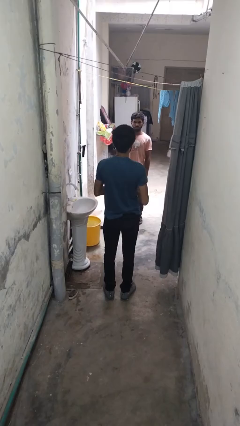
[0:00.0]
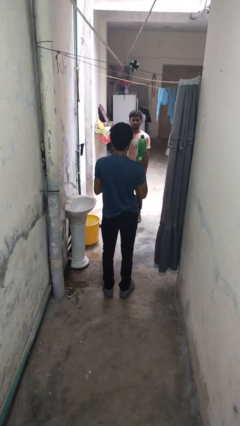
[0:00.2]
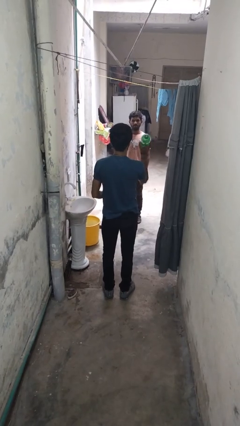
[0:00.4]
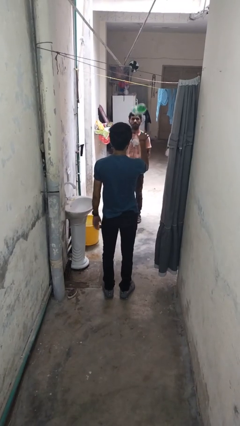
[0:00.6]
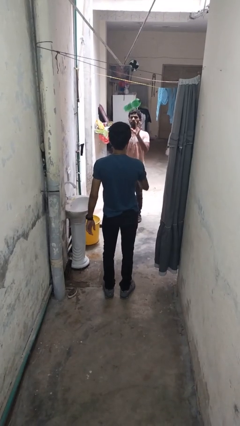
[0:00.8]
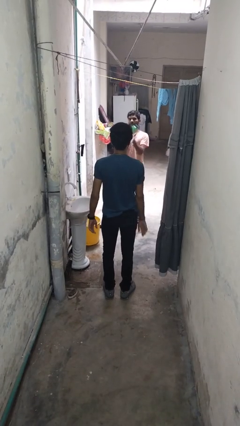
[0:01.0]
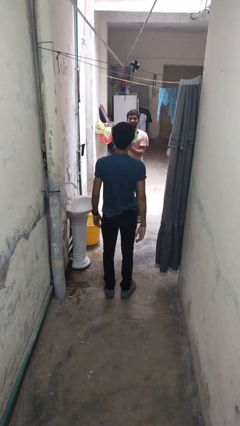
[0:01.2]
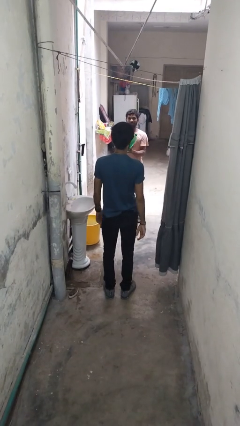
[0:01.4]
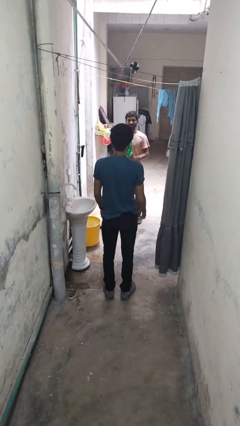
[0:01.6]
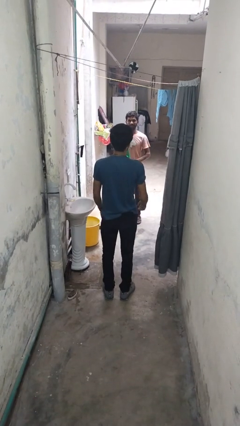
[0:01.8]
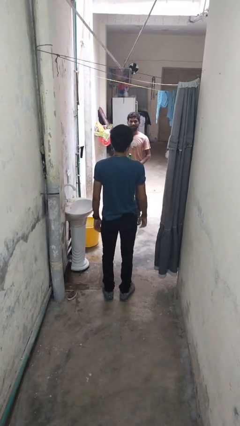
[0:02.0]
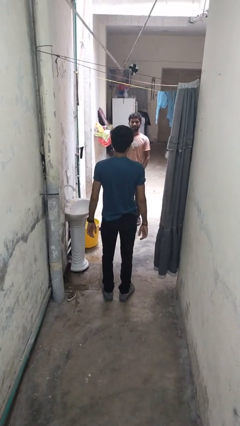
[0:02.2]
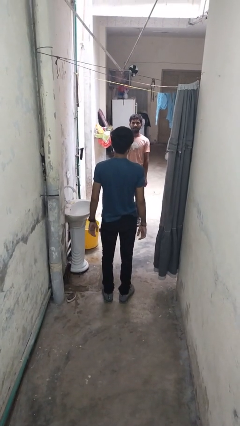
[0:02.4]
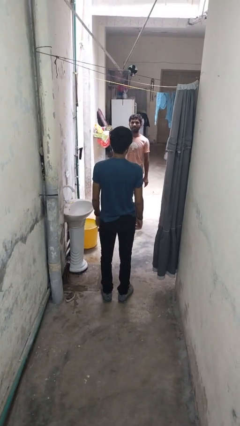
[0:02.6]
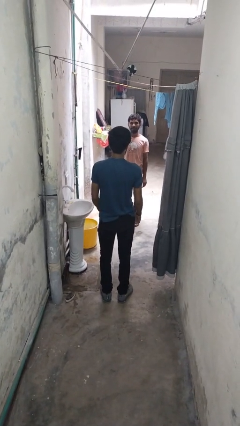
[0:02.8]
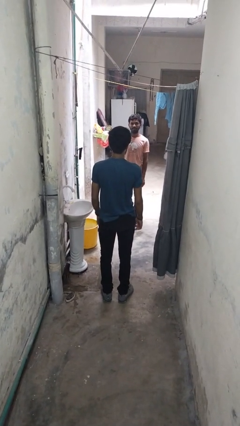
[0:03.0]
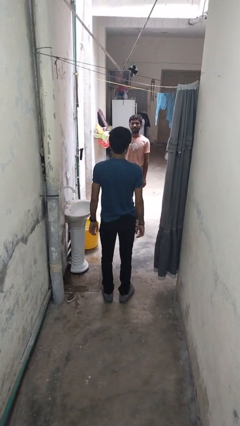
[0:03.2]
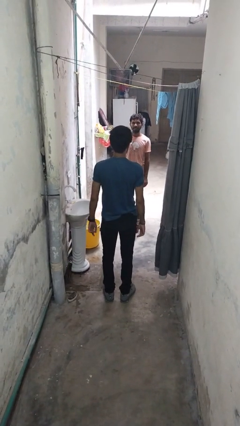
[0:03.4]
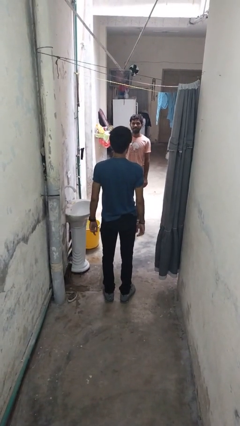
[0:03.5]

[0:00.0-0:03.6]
person throws object to person

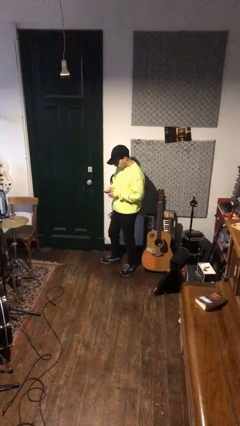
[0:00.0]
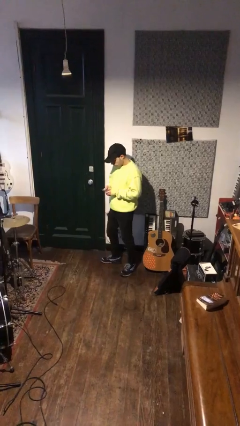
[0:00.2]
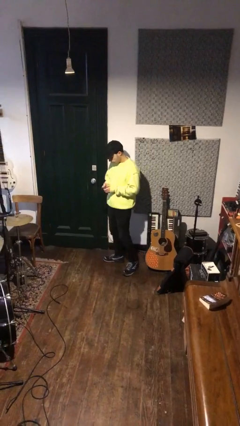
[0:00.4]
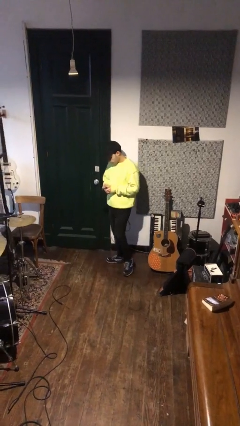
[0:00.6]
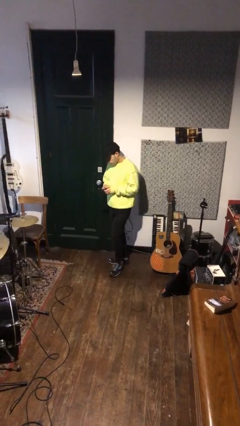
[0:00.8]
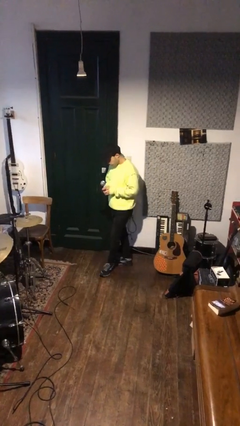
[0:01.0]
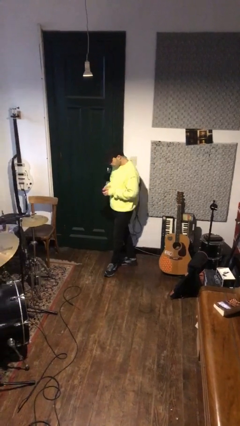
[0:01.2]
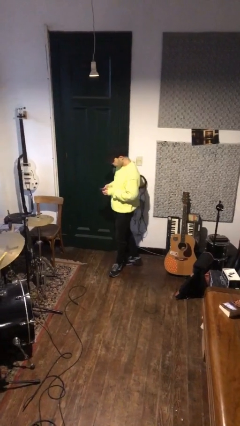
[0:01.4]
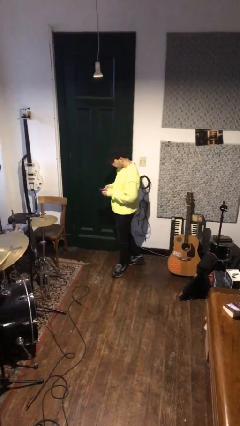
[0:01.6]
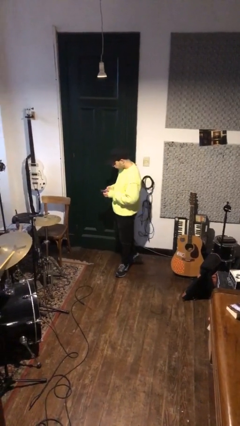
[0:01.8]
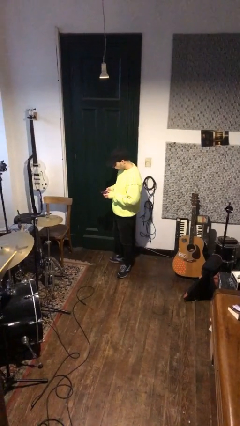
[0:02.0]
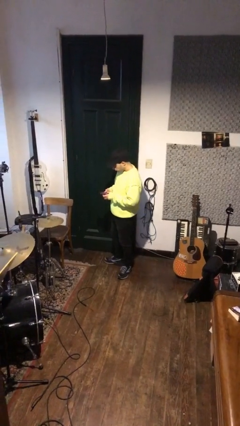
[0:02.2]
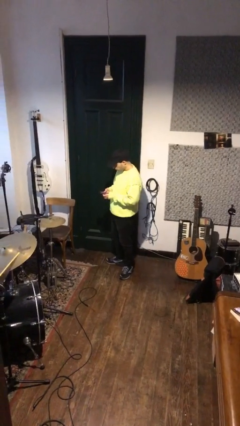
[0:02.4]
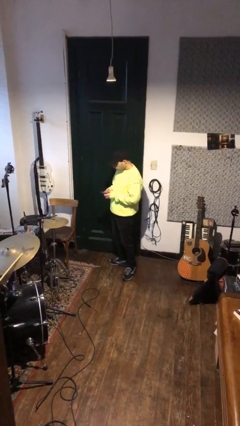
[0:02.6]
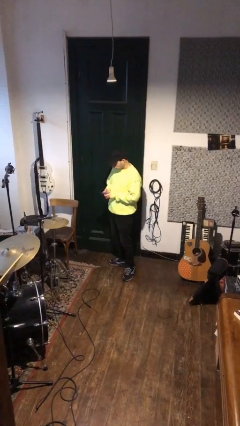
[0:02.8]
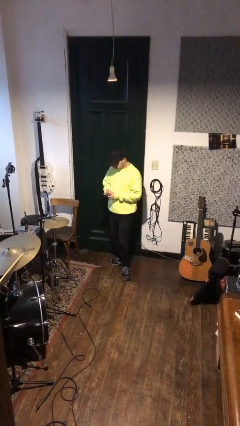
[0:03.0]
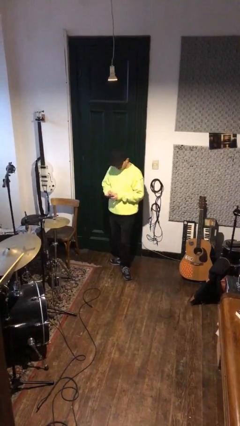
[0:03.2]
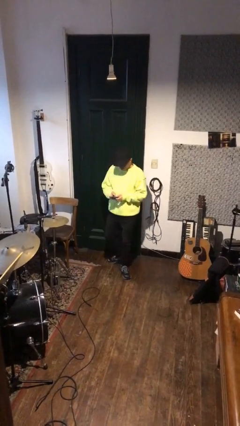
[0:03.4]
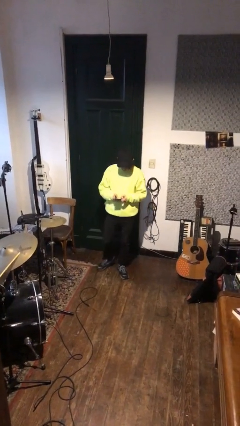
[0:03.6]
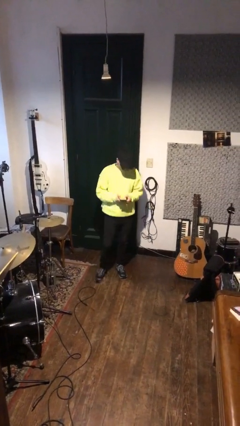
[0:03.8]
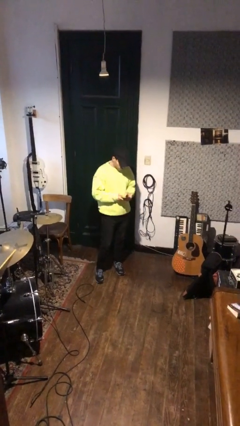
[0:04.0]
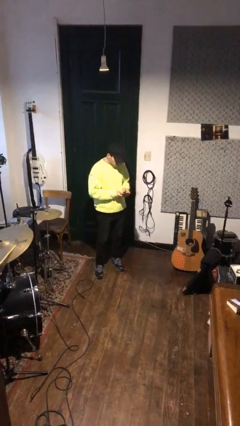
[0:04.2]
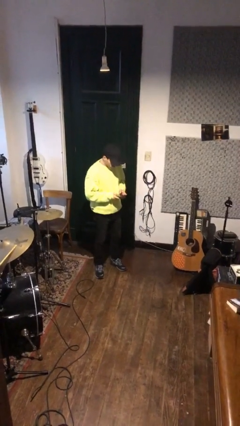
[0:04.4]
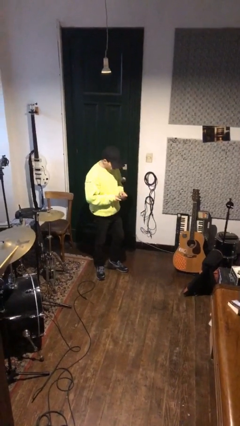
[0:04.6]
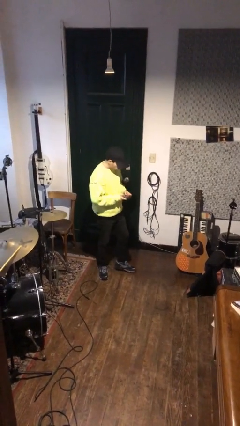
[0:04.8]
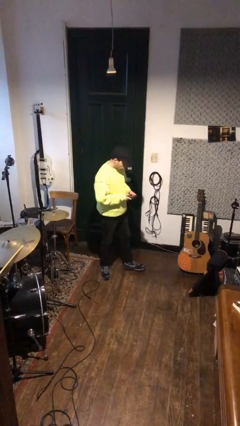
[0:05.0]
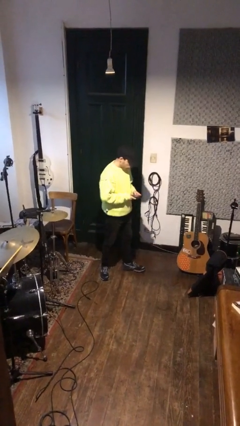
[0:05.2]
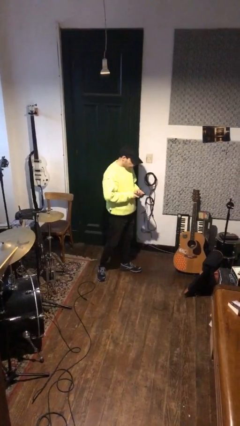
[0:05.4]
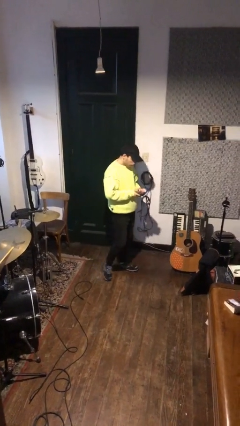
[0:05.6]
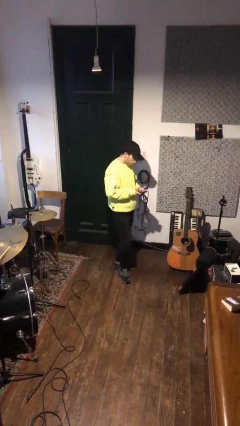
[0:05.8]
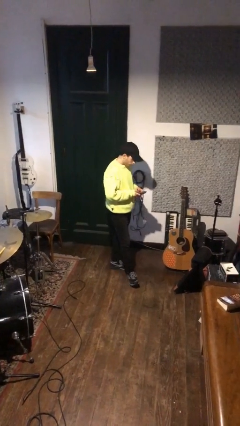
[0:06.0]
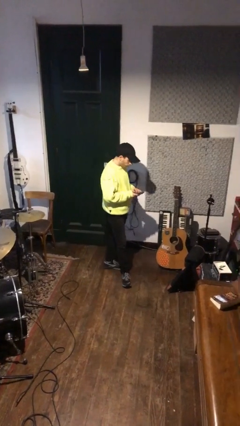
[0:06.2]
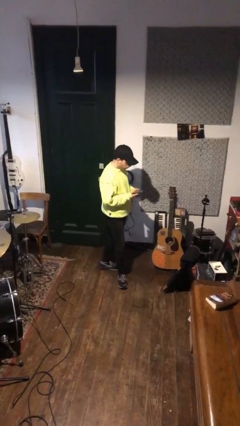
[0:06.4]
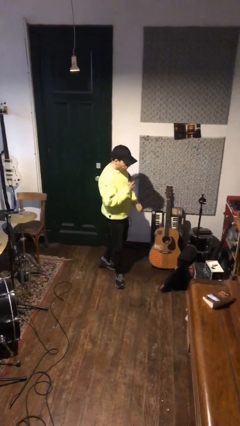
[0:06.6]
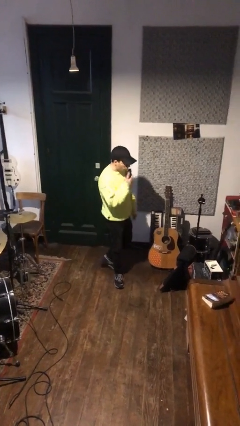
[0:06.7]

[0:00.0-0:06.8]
person texts on phone

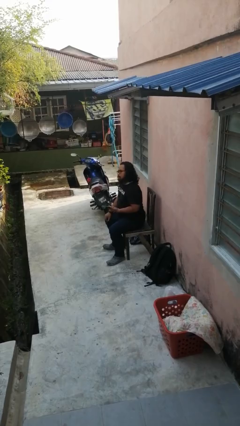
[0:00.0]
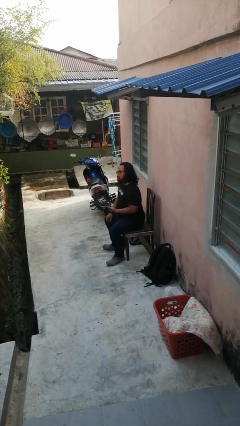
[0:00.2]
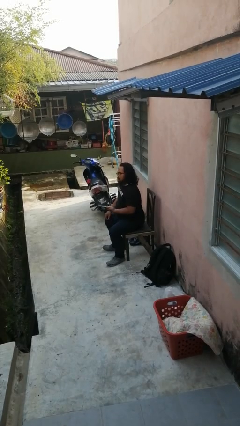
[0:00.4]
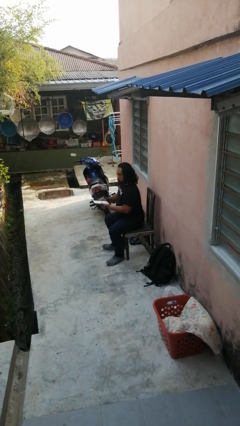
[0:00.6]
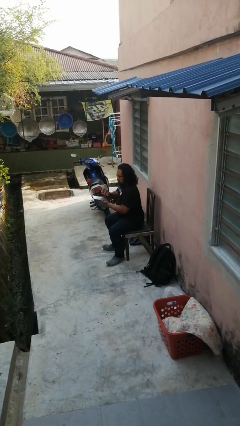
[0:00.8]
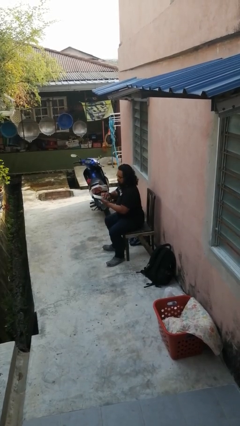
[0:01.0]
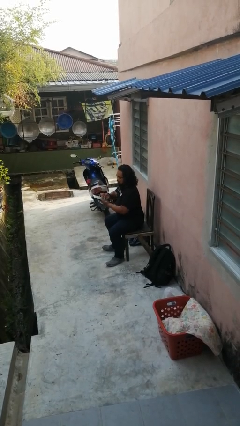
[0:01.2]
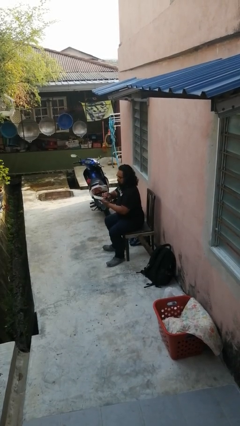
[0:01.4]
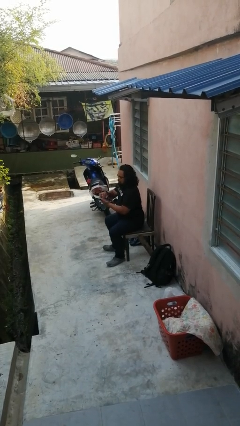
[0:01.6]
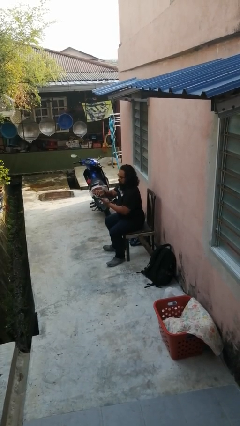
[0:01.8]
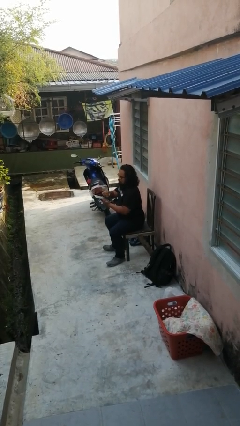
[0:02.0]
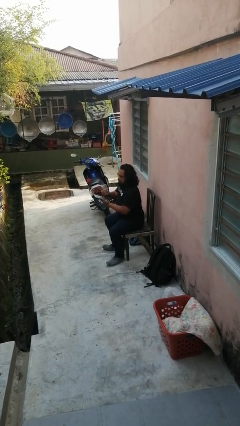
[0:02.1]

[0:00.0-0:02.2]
person interacts with tablet

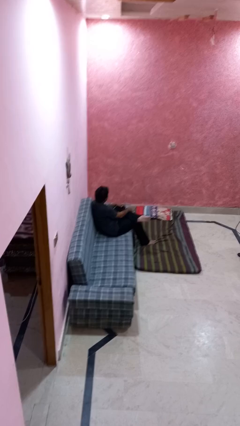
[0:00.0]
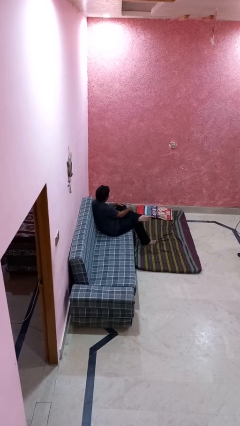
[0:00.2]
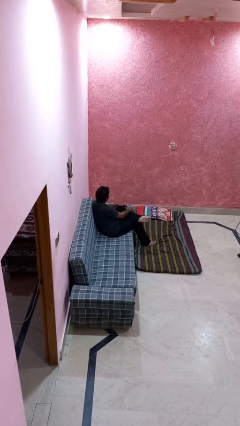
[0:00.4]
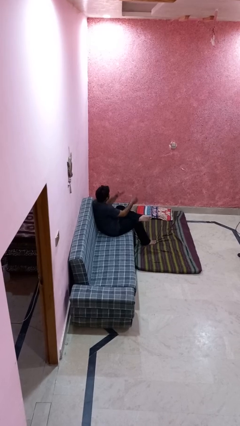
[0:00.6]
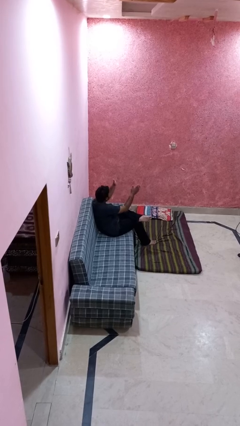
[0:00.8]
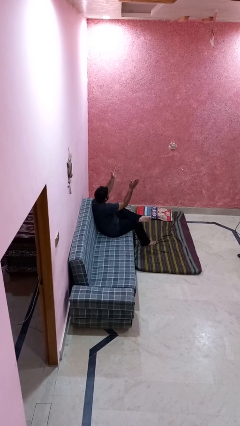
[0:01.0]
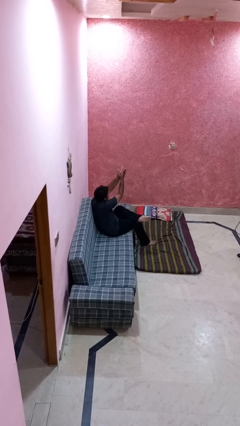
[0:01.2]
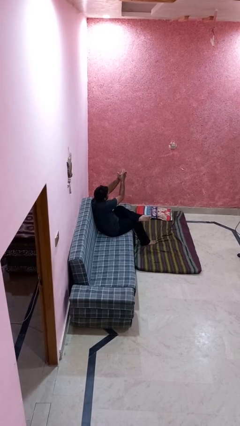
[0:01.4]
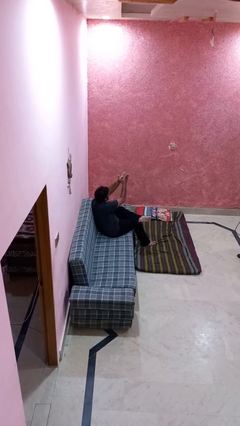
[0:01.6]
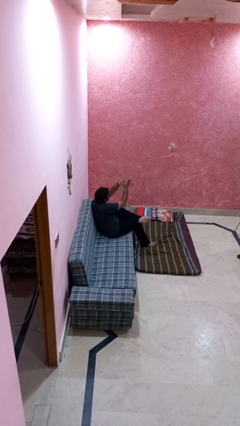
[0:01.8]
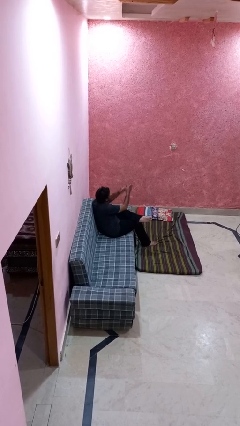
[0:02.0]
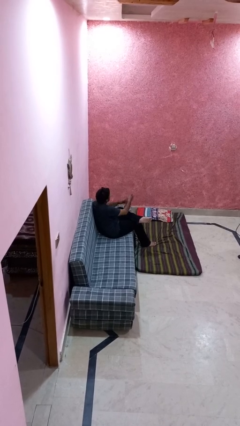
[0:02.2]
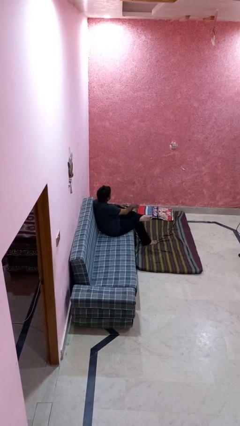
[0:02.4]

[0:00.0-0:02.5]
person swats bug

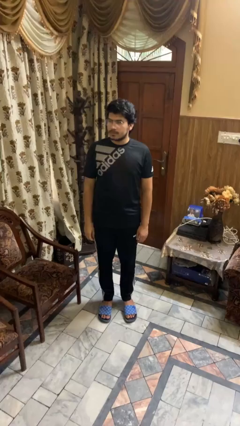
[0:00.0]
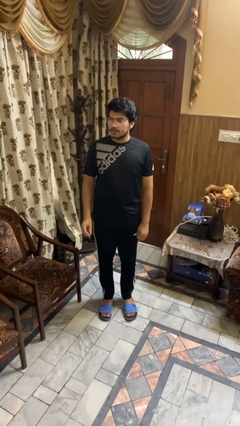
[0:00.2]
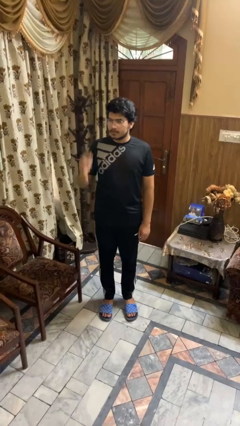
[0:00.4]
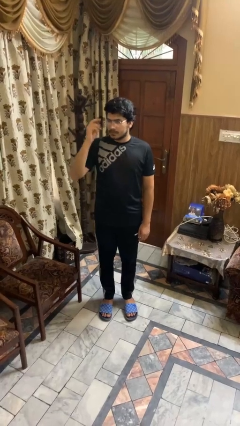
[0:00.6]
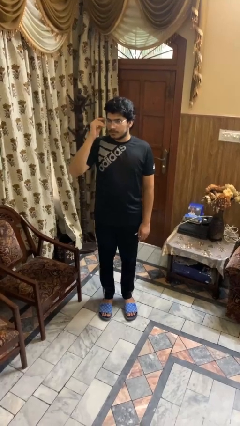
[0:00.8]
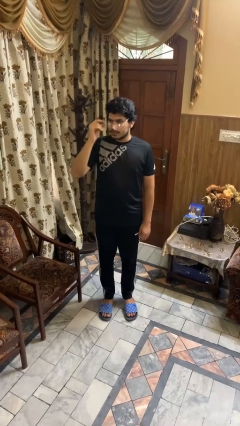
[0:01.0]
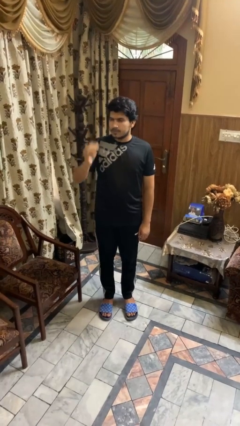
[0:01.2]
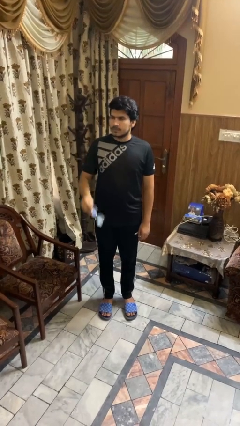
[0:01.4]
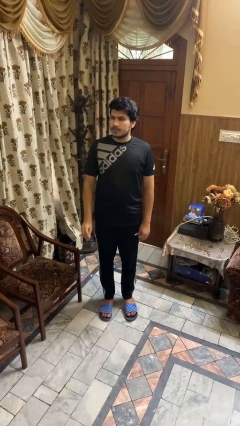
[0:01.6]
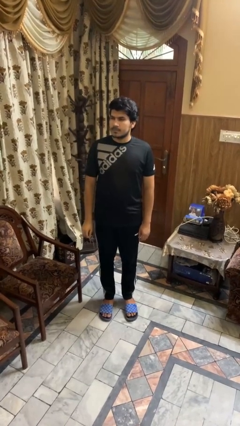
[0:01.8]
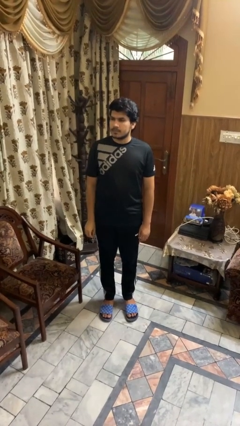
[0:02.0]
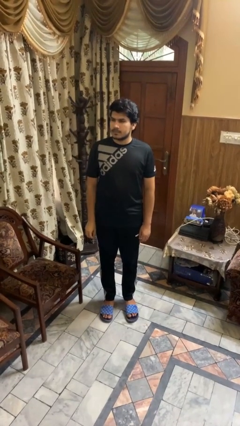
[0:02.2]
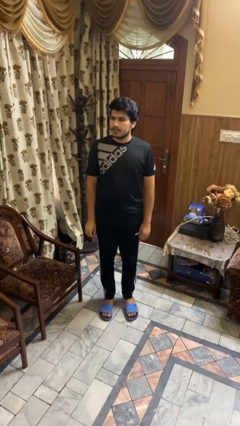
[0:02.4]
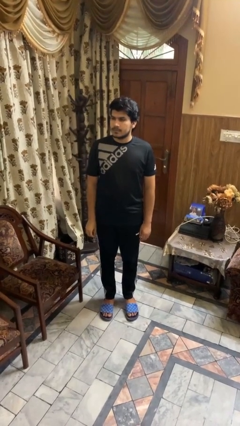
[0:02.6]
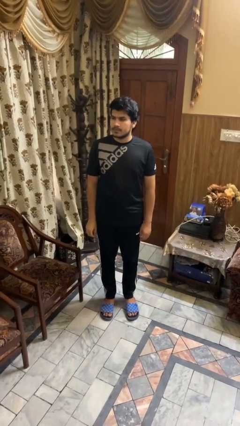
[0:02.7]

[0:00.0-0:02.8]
person takes off glasses
